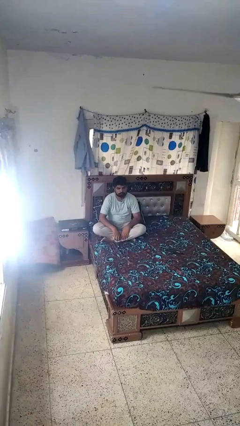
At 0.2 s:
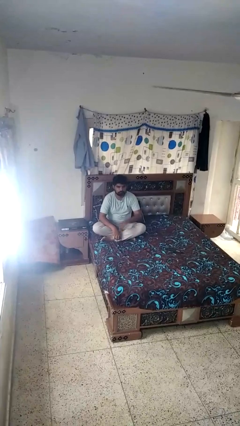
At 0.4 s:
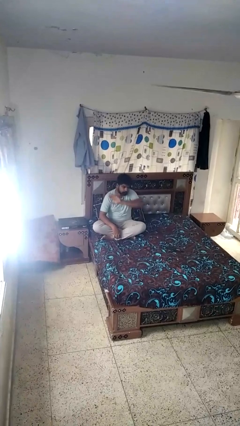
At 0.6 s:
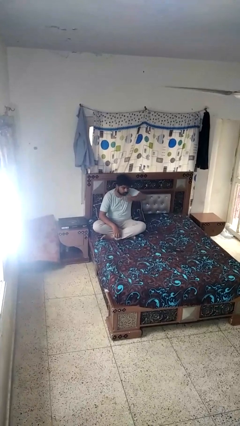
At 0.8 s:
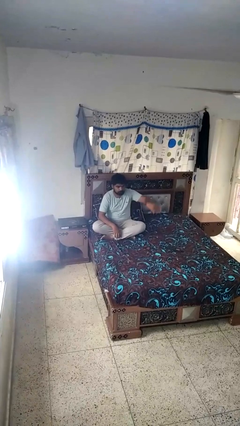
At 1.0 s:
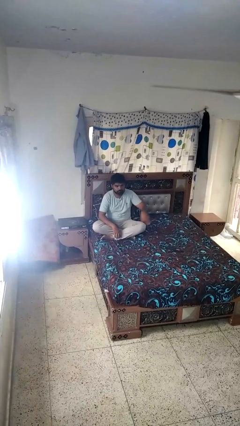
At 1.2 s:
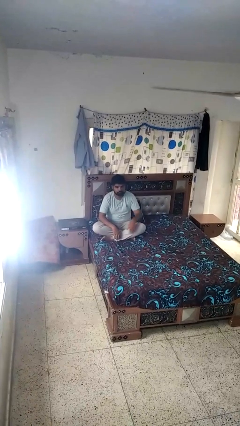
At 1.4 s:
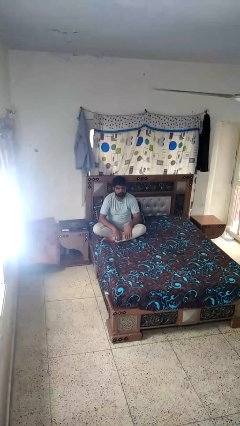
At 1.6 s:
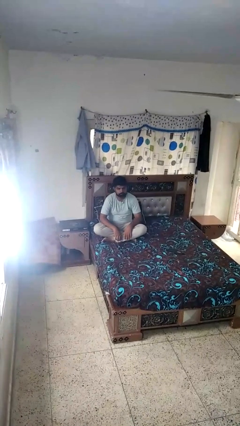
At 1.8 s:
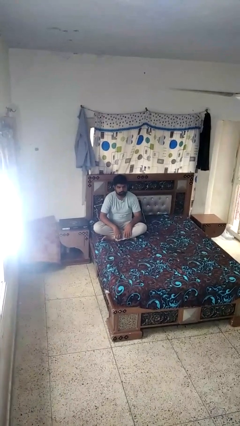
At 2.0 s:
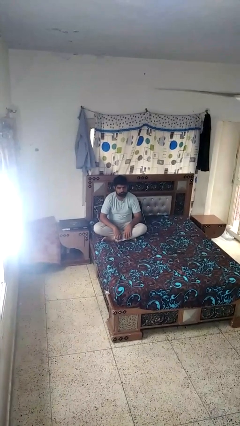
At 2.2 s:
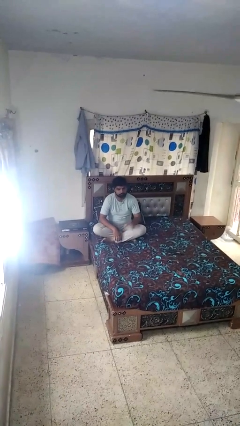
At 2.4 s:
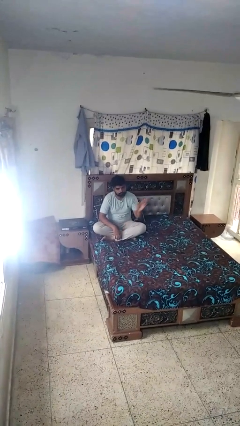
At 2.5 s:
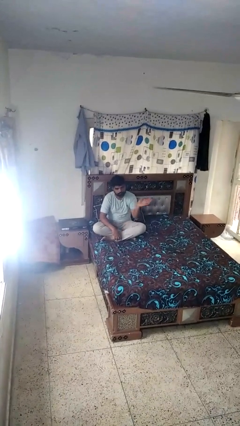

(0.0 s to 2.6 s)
person gestures swipe left

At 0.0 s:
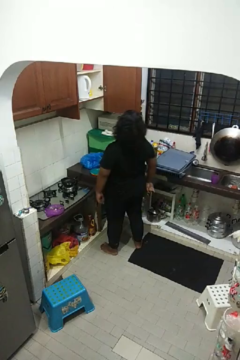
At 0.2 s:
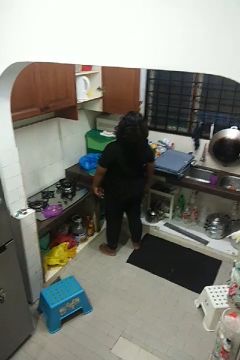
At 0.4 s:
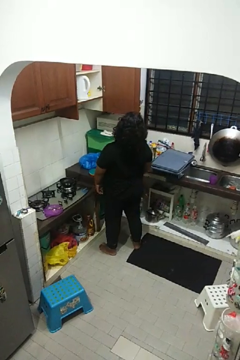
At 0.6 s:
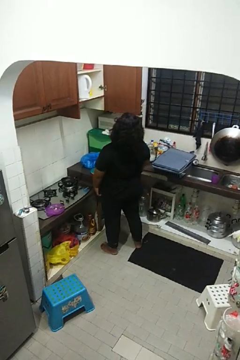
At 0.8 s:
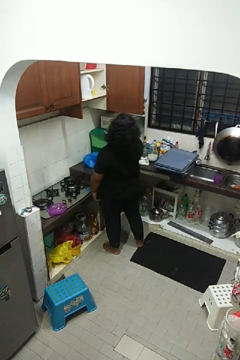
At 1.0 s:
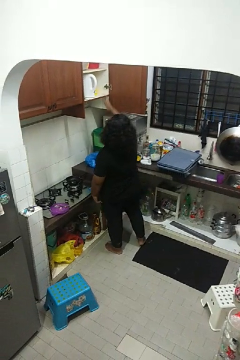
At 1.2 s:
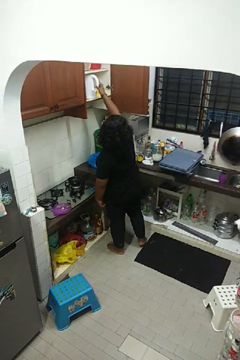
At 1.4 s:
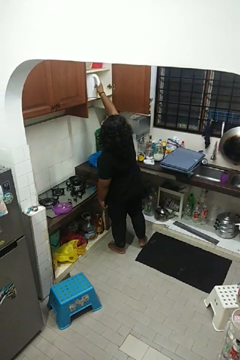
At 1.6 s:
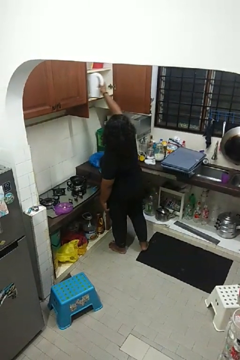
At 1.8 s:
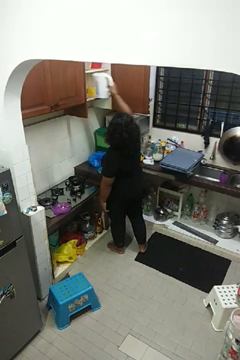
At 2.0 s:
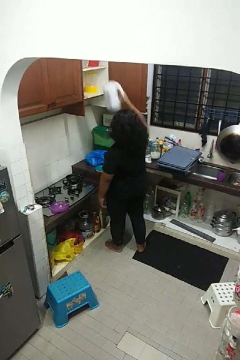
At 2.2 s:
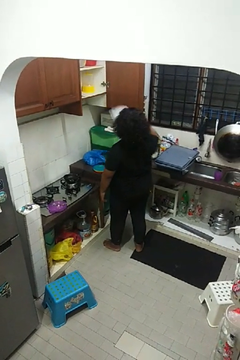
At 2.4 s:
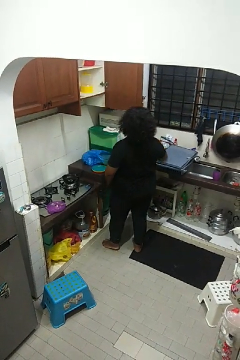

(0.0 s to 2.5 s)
person takes object from cabinet

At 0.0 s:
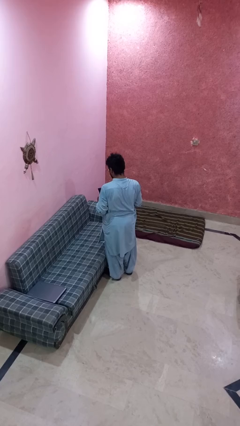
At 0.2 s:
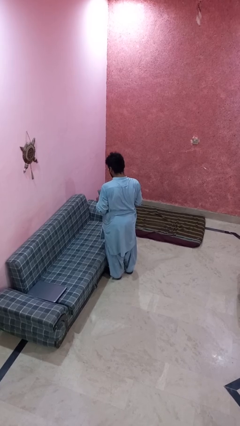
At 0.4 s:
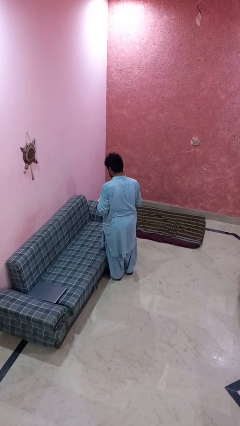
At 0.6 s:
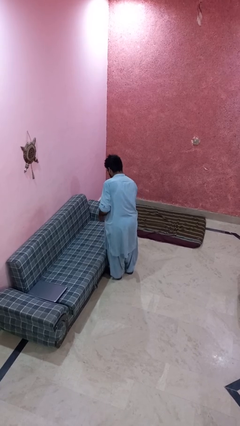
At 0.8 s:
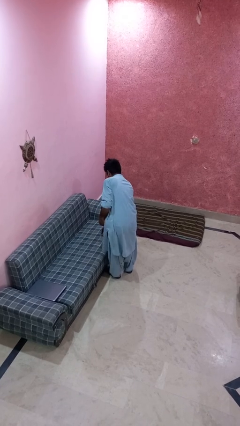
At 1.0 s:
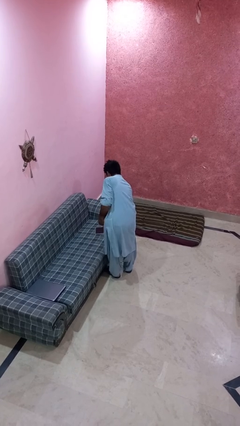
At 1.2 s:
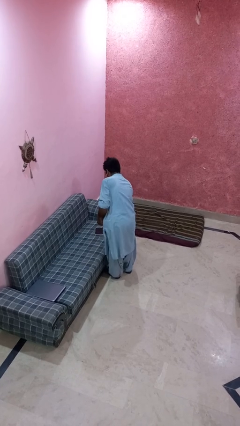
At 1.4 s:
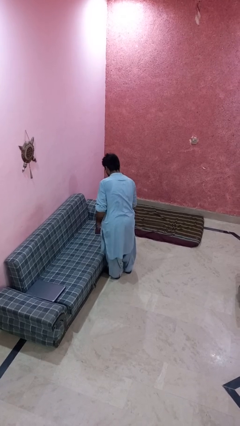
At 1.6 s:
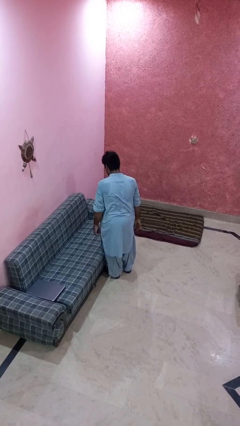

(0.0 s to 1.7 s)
person puts down object on couch

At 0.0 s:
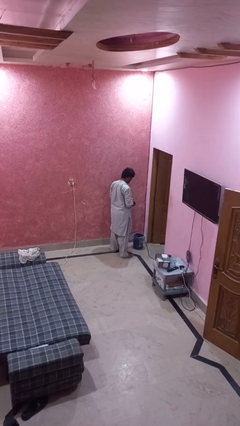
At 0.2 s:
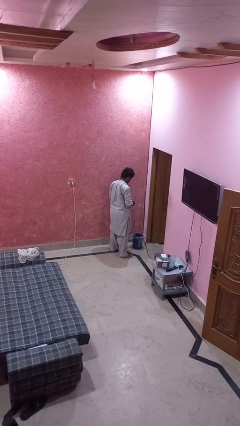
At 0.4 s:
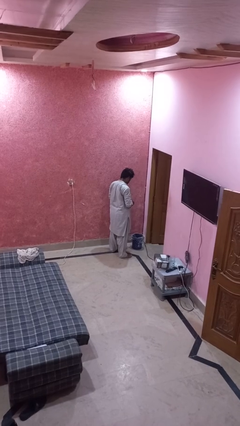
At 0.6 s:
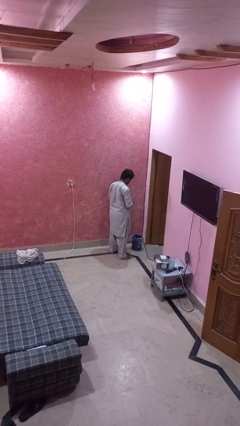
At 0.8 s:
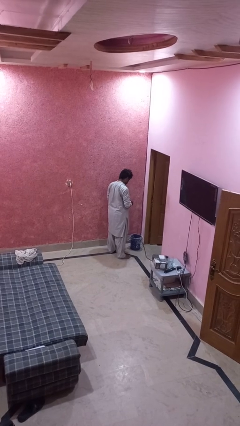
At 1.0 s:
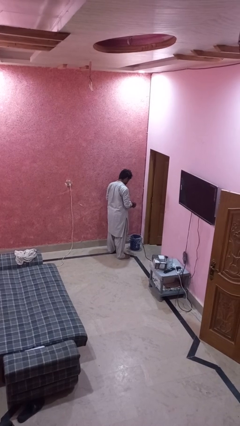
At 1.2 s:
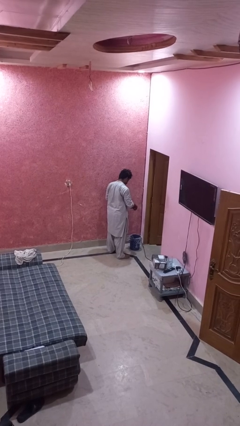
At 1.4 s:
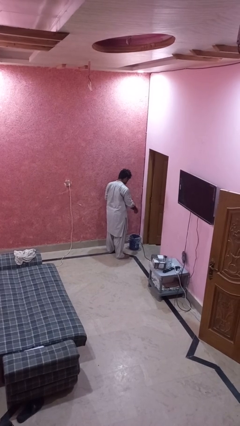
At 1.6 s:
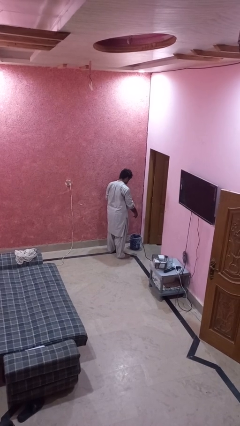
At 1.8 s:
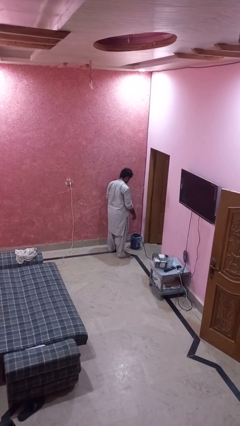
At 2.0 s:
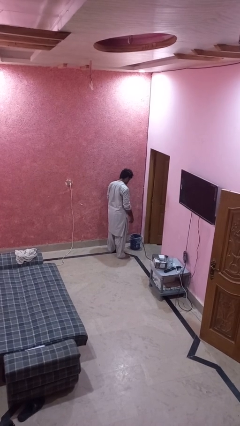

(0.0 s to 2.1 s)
person discards trash

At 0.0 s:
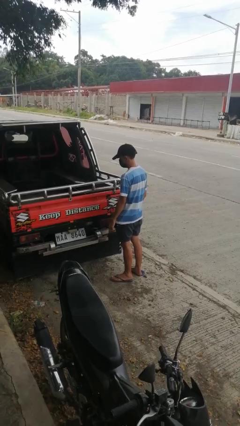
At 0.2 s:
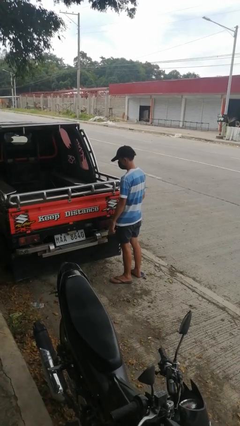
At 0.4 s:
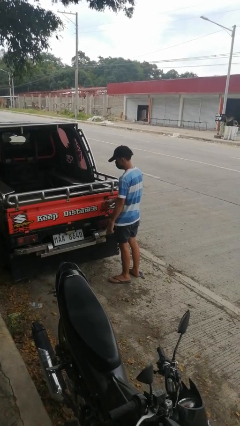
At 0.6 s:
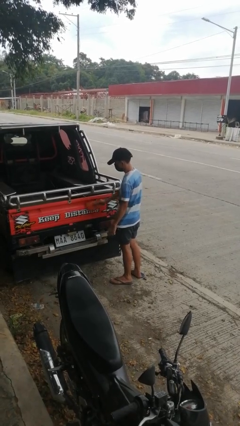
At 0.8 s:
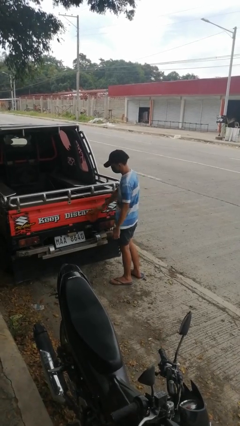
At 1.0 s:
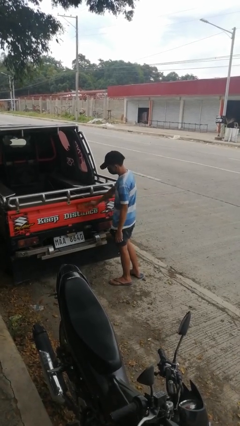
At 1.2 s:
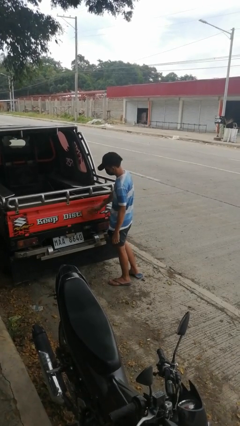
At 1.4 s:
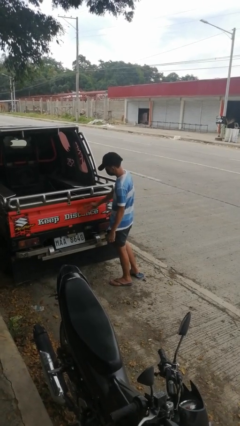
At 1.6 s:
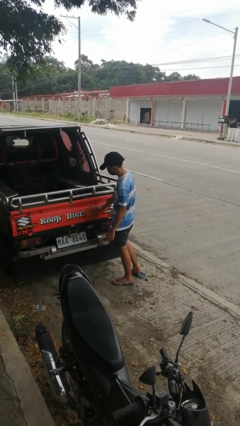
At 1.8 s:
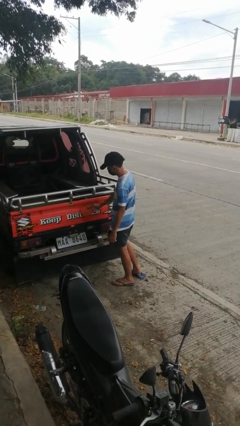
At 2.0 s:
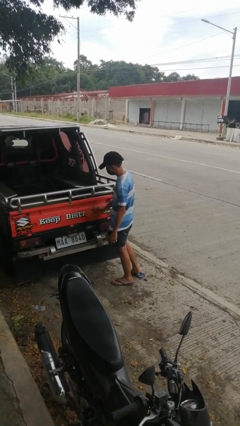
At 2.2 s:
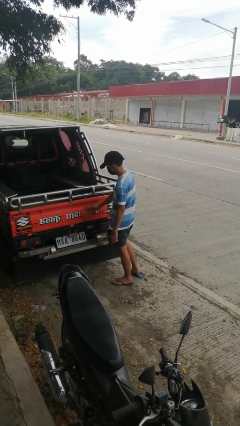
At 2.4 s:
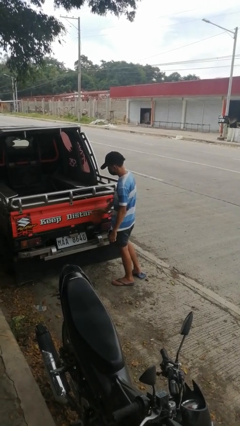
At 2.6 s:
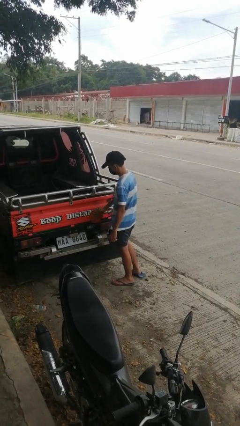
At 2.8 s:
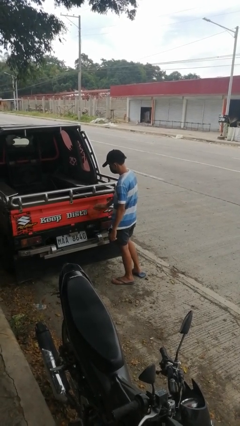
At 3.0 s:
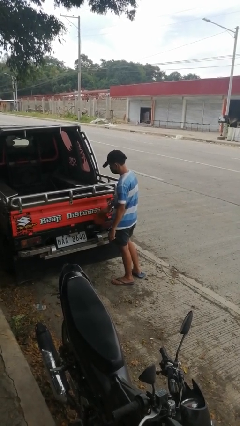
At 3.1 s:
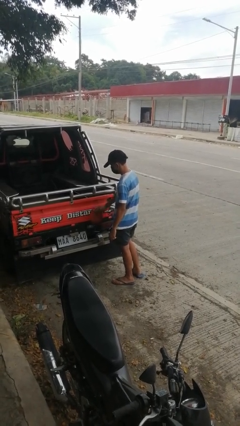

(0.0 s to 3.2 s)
person polishes car with rag

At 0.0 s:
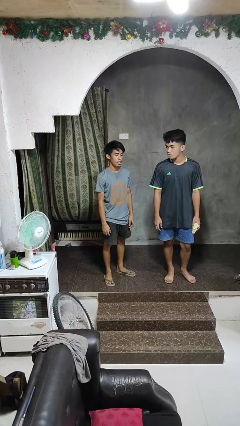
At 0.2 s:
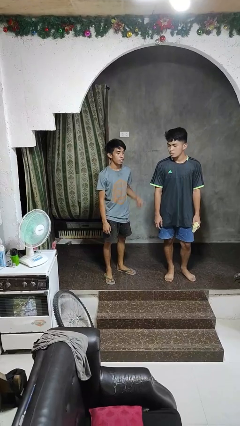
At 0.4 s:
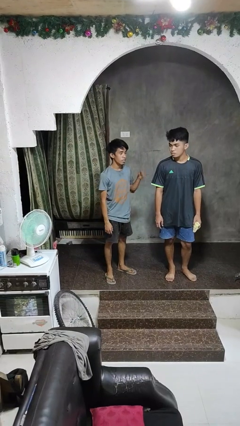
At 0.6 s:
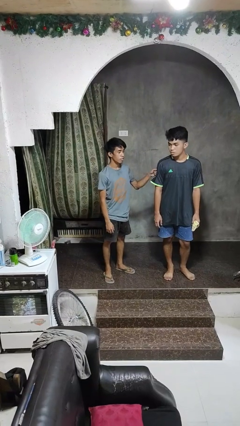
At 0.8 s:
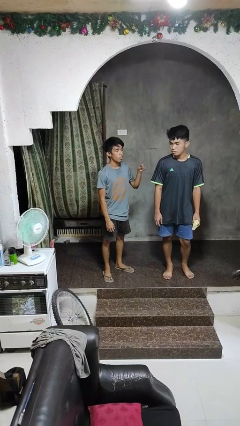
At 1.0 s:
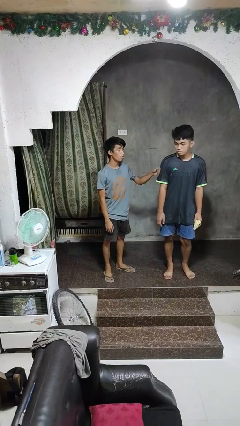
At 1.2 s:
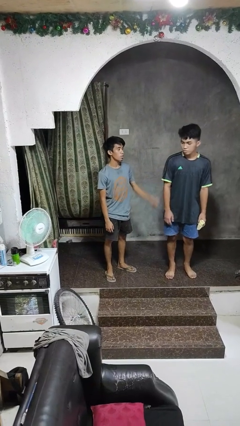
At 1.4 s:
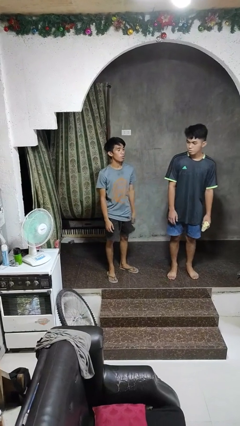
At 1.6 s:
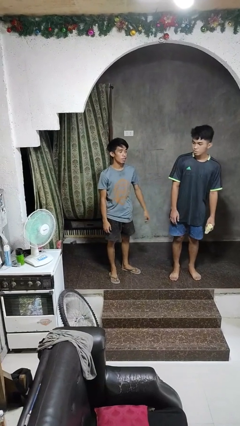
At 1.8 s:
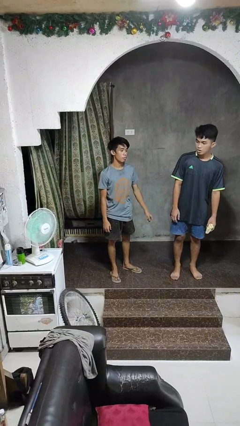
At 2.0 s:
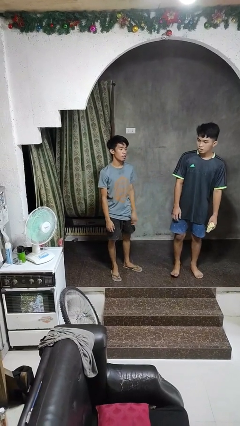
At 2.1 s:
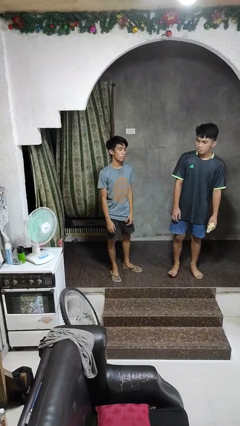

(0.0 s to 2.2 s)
person pounds shoulders of person

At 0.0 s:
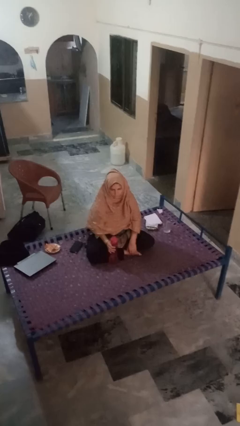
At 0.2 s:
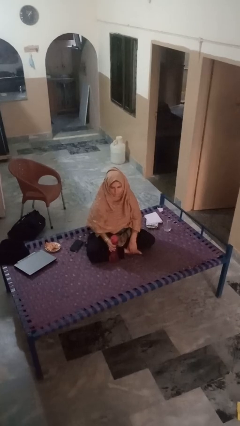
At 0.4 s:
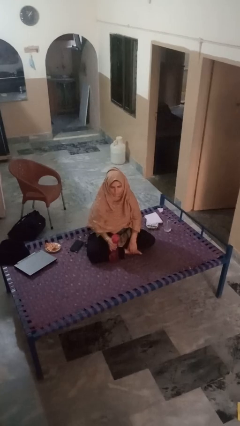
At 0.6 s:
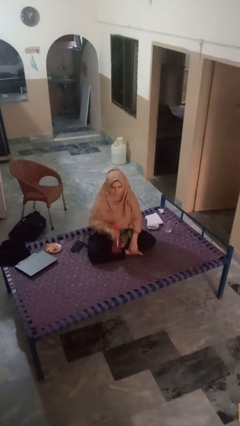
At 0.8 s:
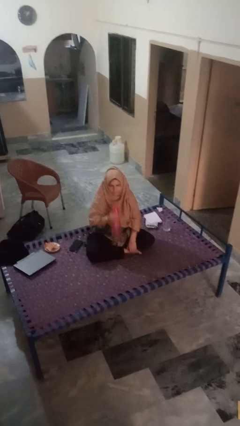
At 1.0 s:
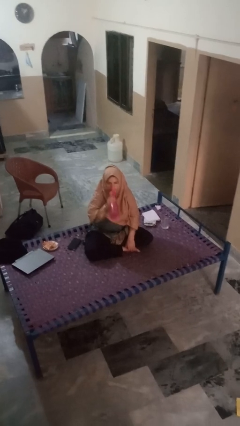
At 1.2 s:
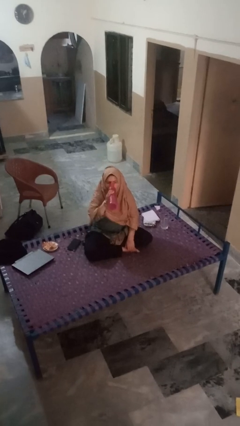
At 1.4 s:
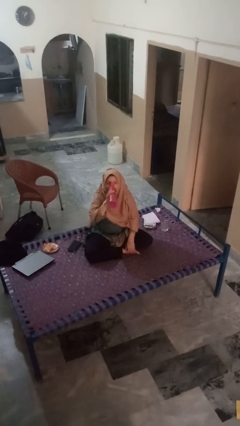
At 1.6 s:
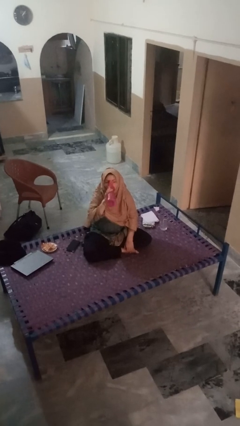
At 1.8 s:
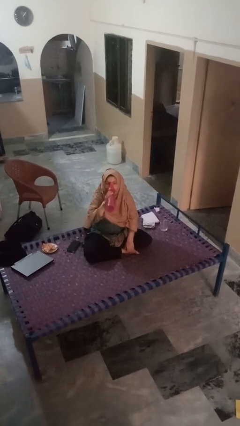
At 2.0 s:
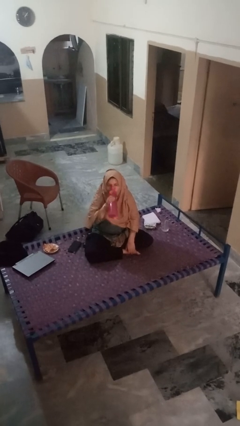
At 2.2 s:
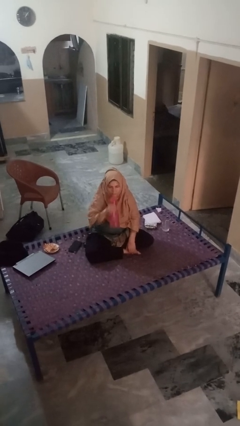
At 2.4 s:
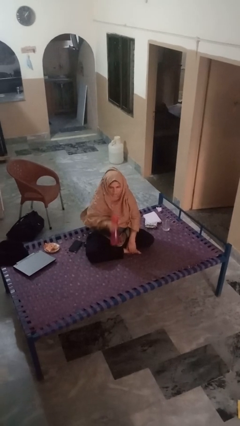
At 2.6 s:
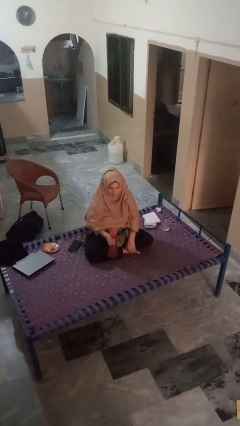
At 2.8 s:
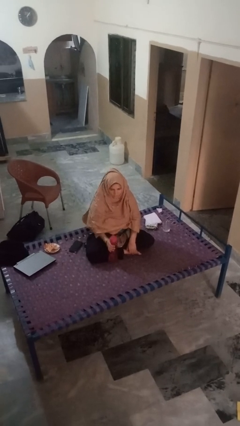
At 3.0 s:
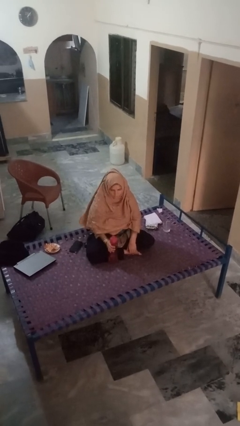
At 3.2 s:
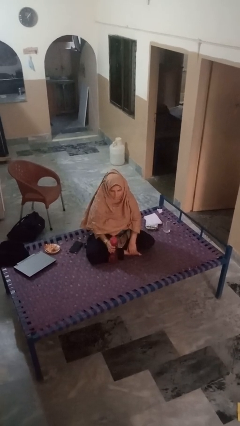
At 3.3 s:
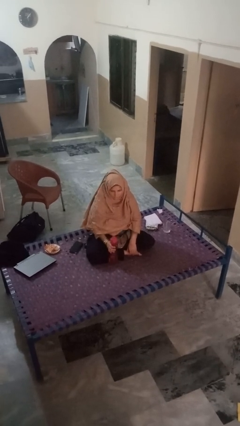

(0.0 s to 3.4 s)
person drinks from bottle

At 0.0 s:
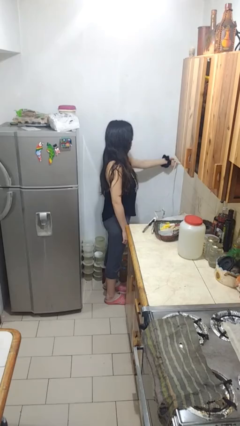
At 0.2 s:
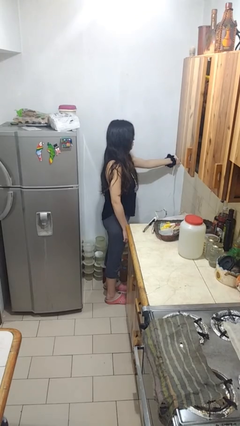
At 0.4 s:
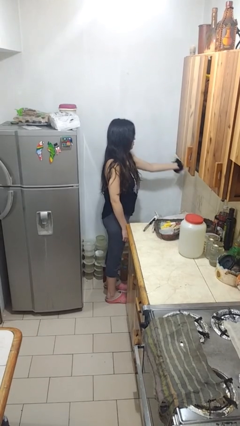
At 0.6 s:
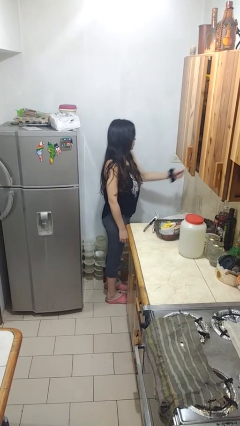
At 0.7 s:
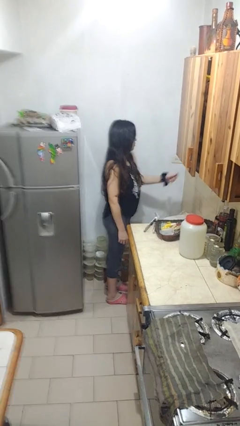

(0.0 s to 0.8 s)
person unplugs from electrical socket
